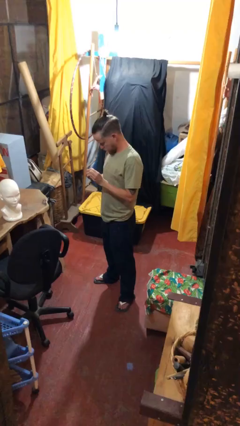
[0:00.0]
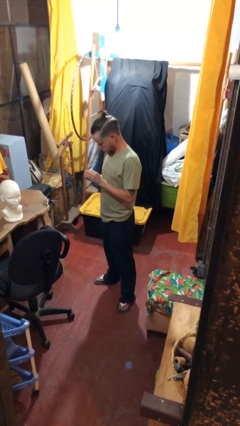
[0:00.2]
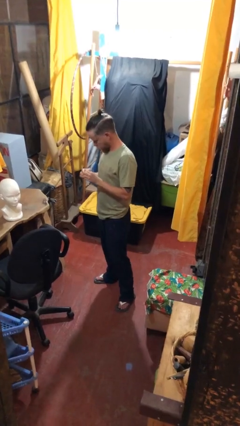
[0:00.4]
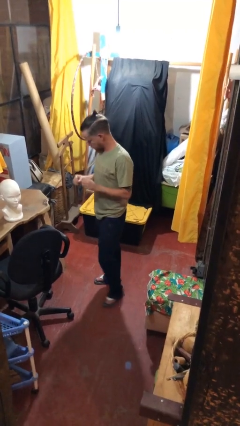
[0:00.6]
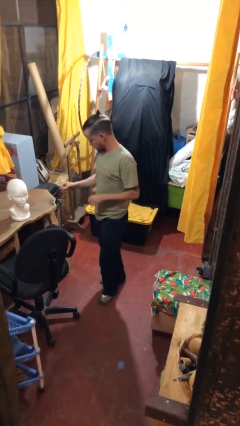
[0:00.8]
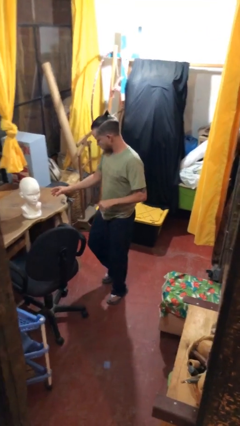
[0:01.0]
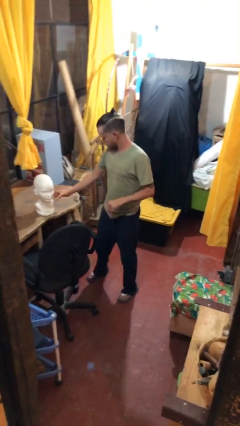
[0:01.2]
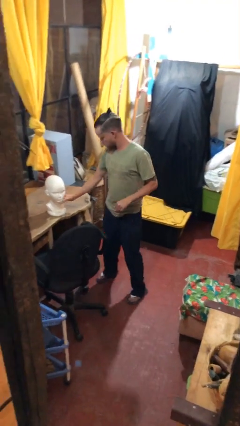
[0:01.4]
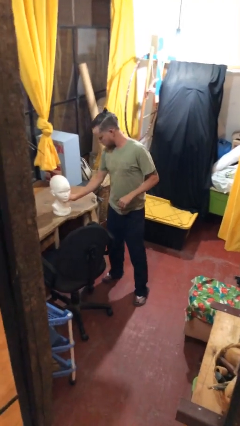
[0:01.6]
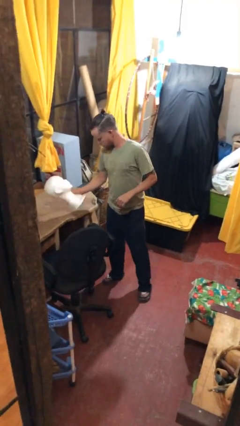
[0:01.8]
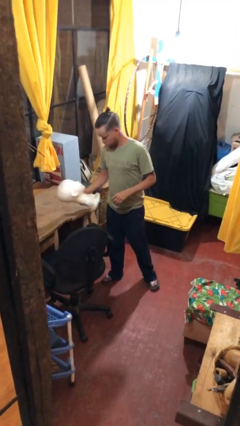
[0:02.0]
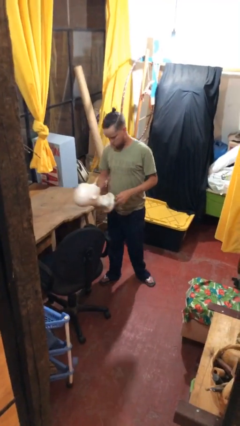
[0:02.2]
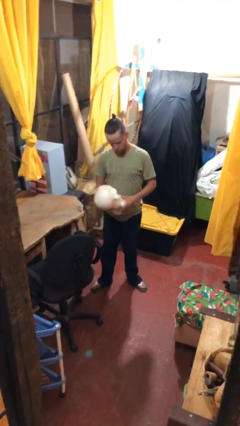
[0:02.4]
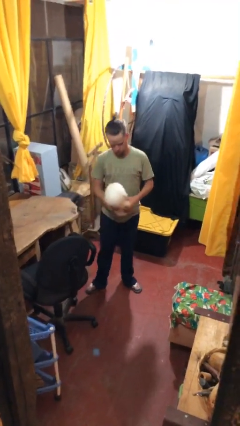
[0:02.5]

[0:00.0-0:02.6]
person picks up object from table

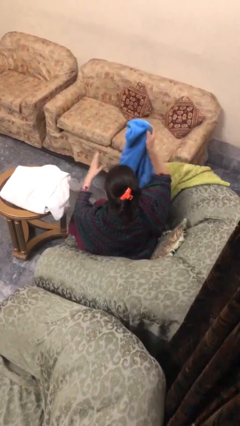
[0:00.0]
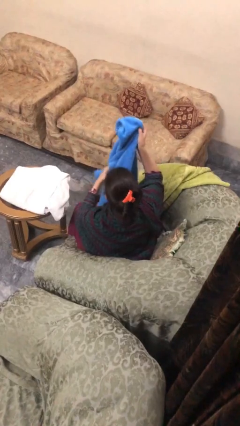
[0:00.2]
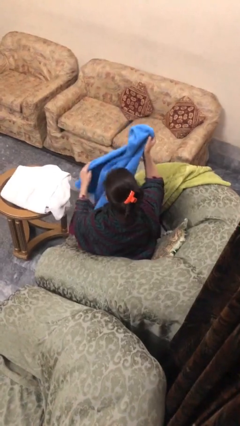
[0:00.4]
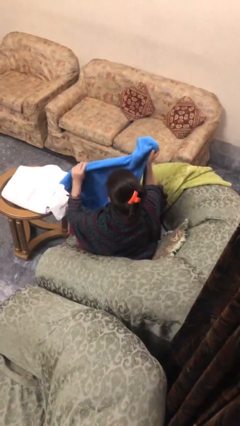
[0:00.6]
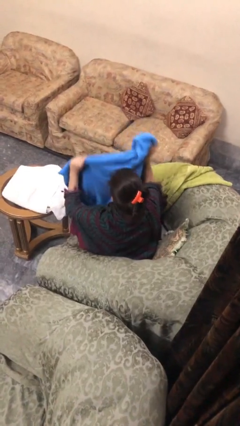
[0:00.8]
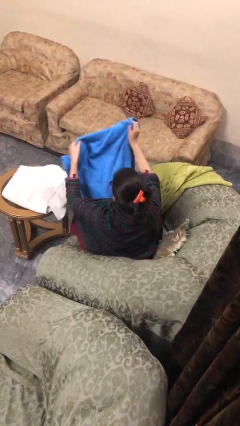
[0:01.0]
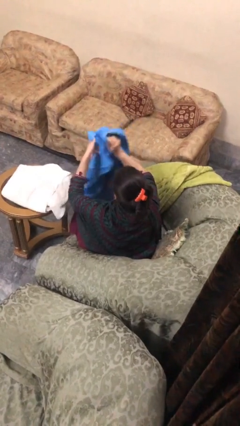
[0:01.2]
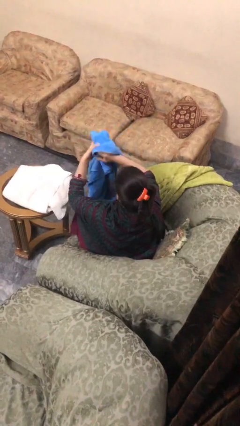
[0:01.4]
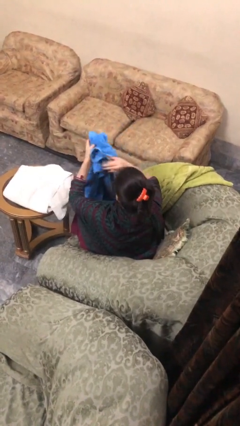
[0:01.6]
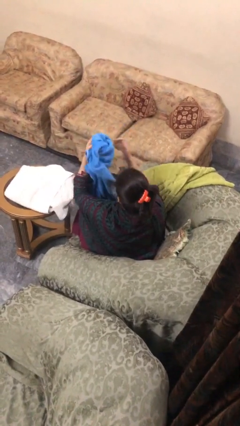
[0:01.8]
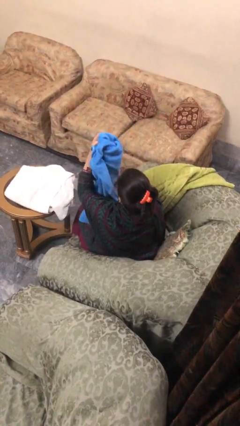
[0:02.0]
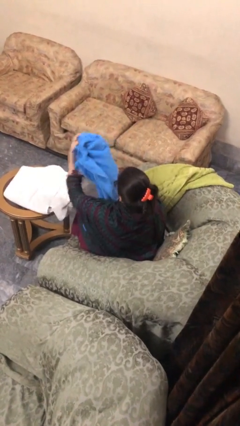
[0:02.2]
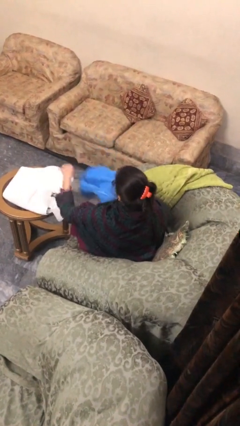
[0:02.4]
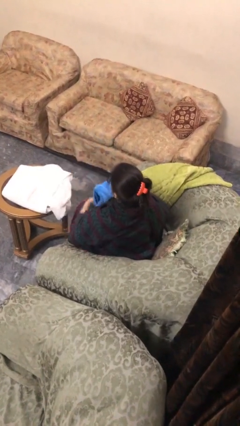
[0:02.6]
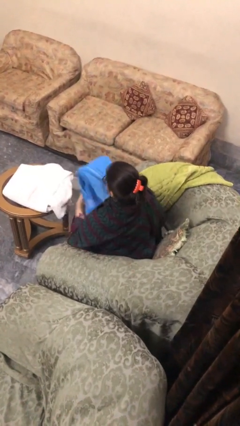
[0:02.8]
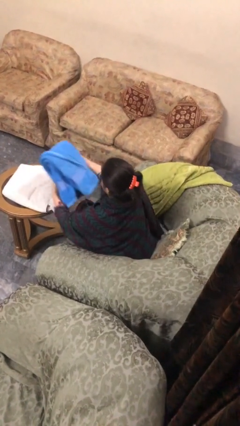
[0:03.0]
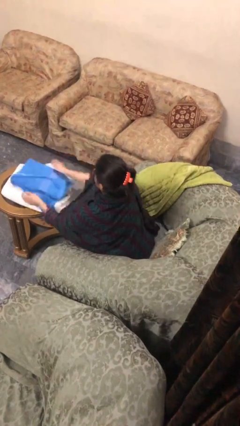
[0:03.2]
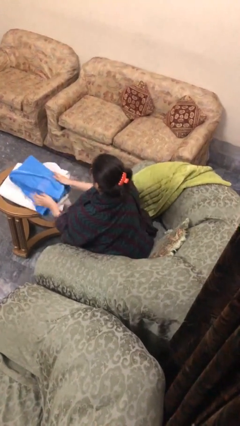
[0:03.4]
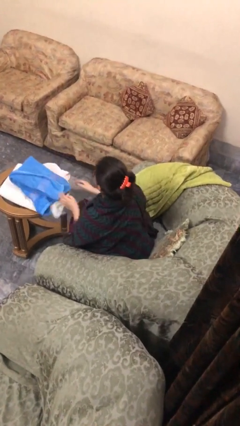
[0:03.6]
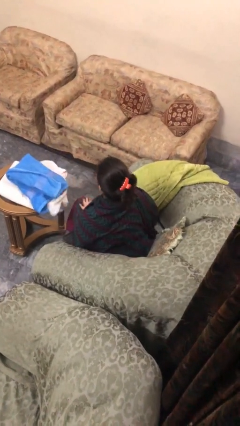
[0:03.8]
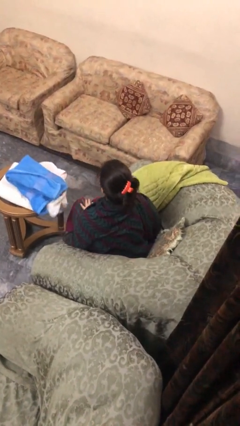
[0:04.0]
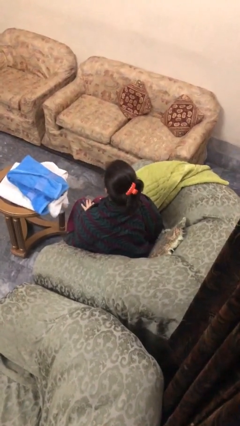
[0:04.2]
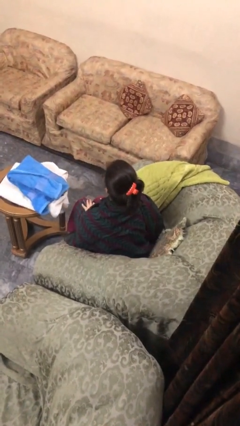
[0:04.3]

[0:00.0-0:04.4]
person folds towel

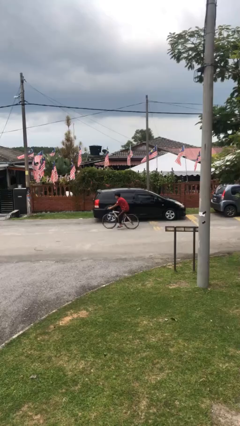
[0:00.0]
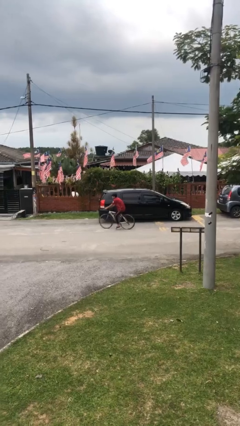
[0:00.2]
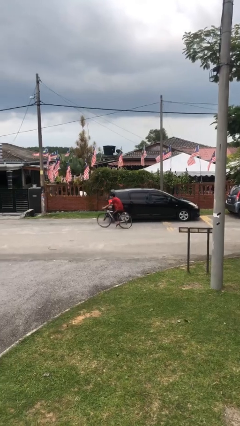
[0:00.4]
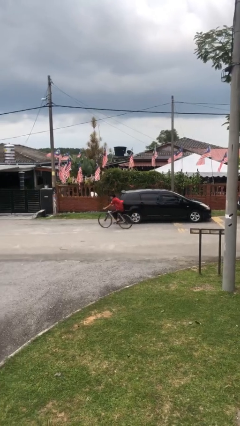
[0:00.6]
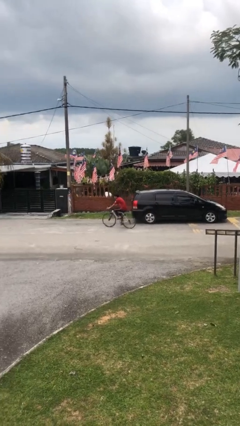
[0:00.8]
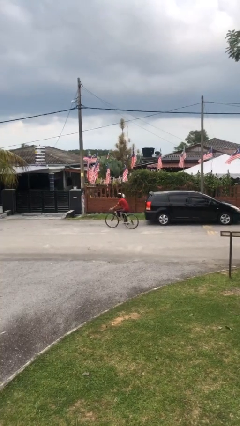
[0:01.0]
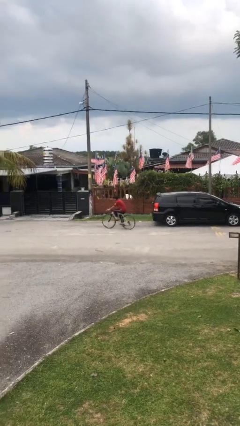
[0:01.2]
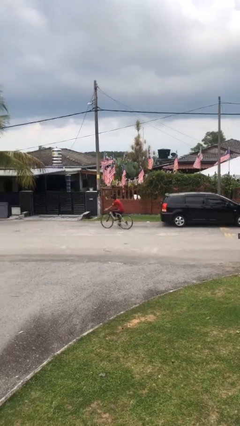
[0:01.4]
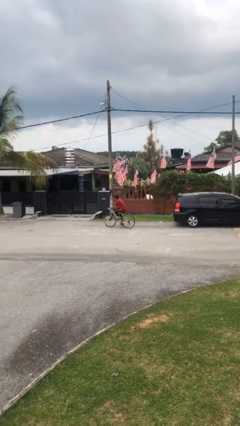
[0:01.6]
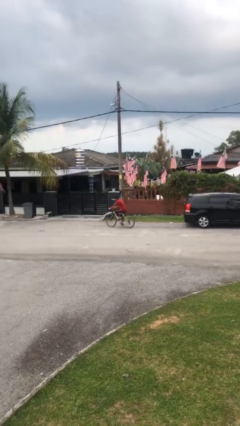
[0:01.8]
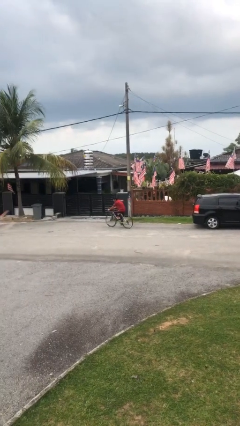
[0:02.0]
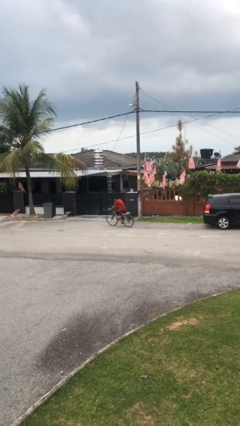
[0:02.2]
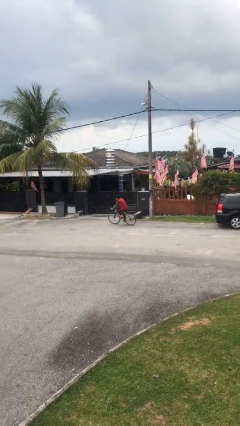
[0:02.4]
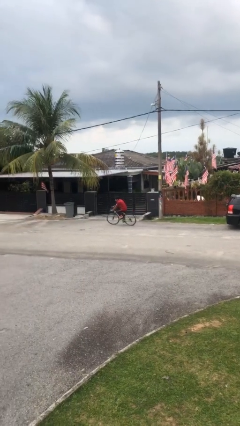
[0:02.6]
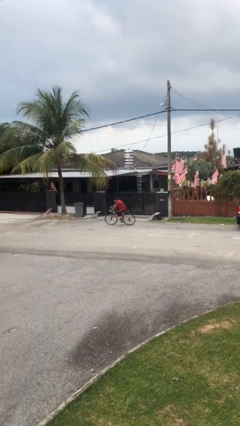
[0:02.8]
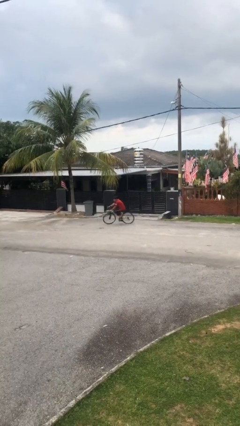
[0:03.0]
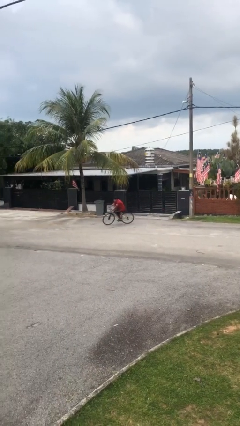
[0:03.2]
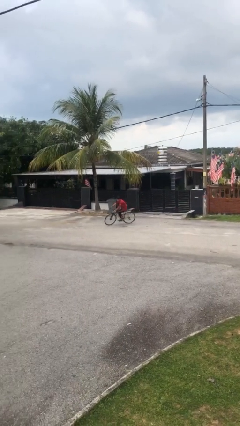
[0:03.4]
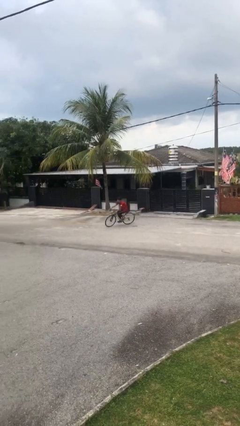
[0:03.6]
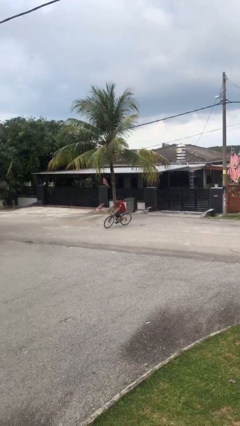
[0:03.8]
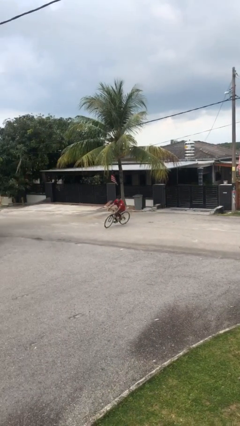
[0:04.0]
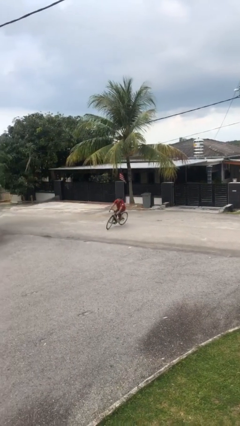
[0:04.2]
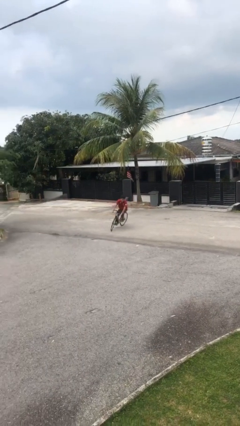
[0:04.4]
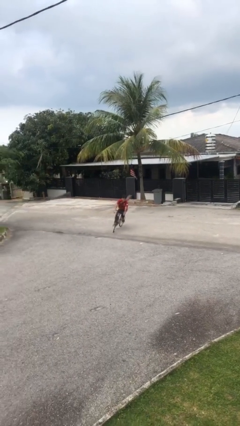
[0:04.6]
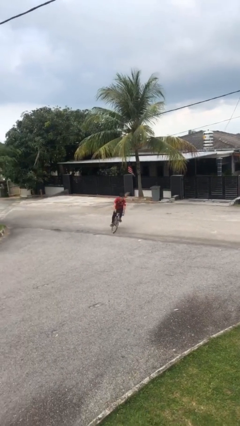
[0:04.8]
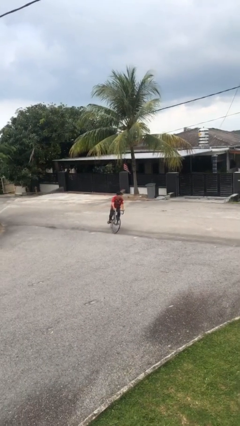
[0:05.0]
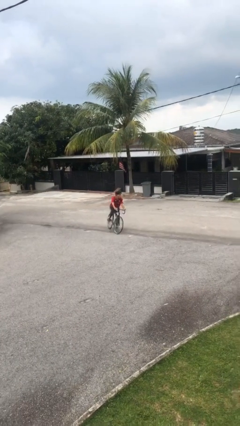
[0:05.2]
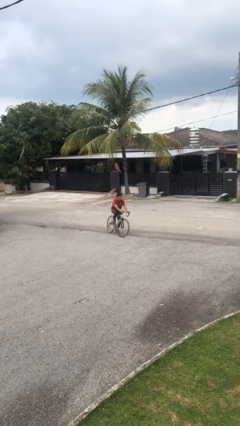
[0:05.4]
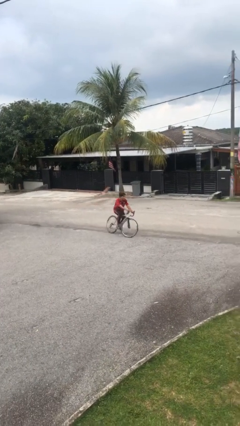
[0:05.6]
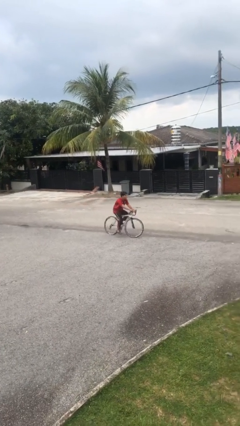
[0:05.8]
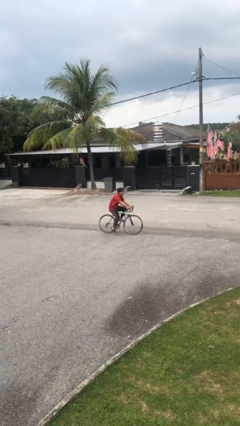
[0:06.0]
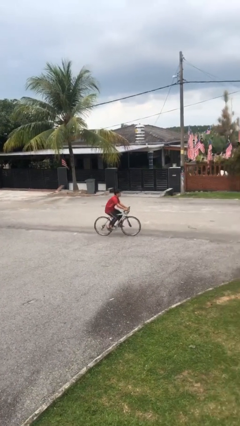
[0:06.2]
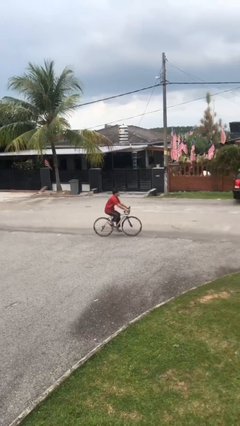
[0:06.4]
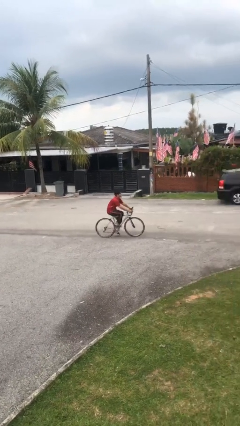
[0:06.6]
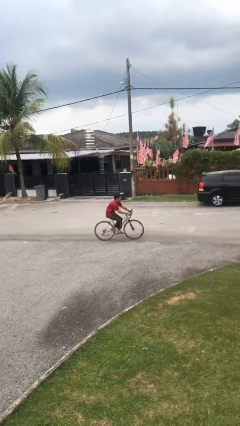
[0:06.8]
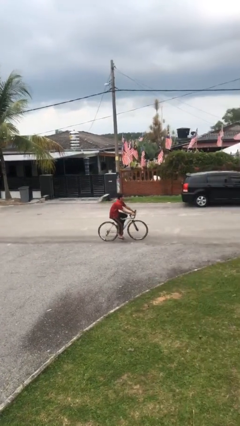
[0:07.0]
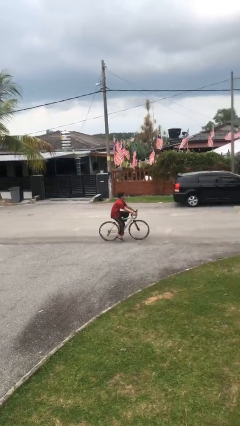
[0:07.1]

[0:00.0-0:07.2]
person rides bicycle

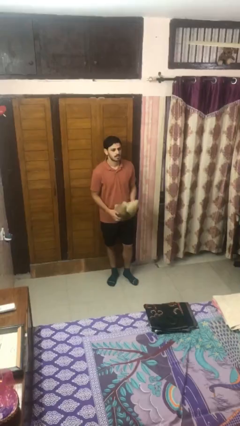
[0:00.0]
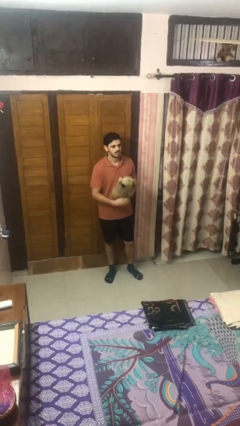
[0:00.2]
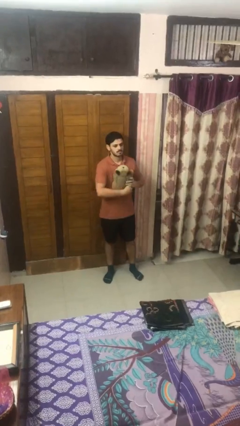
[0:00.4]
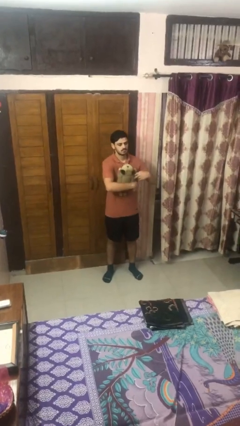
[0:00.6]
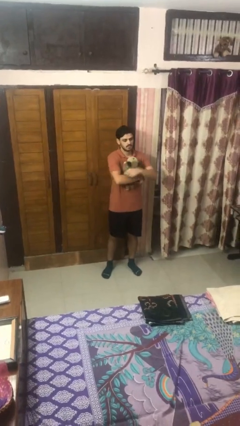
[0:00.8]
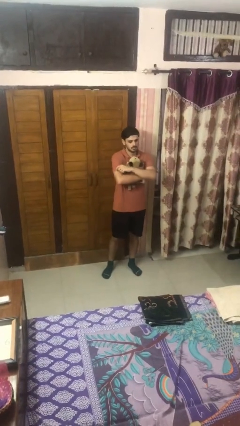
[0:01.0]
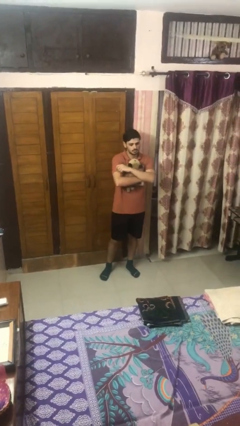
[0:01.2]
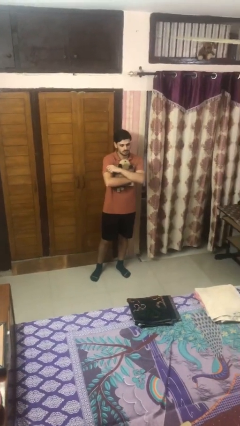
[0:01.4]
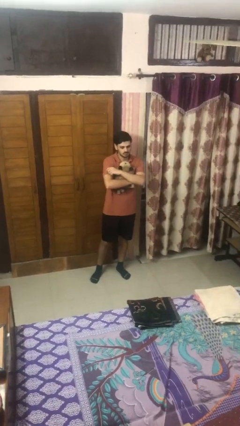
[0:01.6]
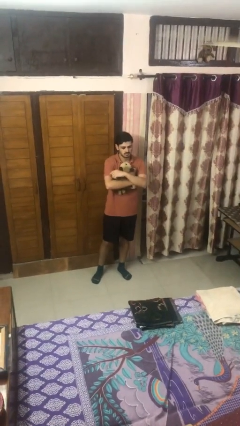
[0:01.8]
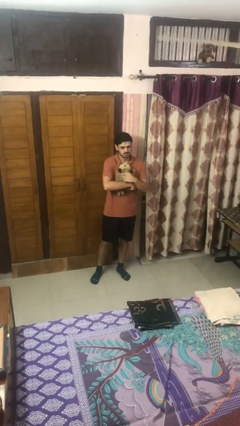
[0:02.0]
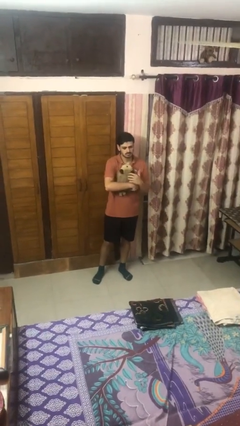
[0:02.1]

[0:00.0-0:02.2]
person hugs stuffed animal

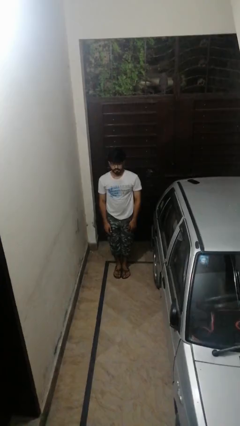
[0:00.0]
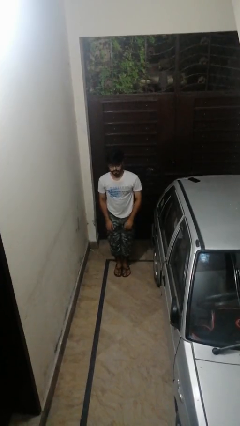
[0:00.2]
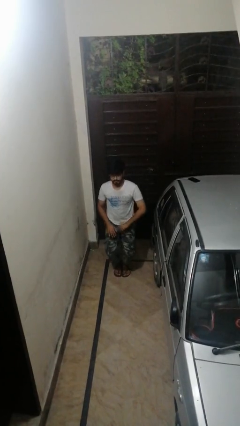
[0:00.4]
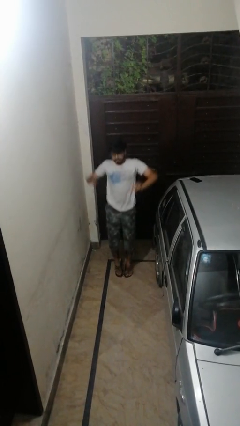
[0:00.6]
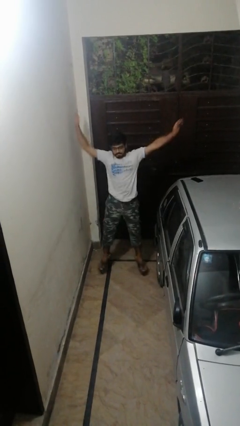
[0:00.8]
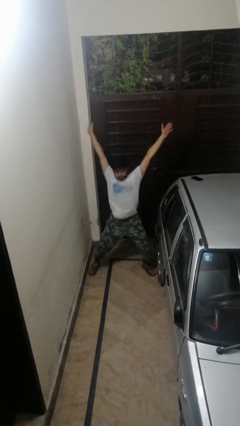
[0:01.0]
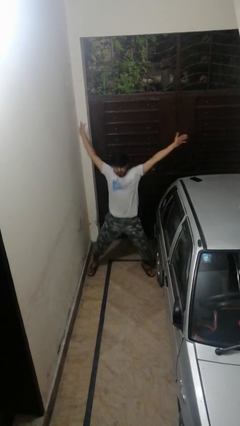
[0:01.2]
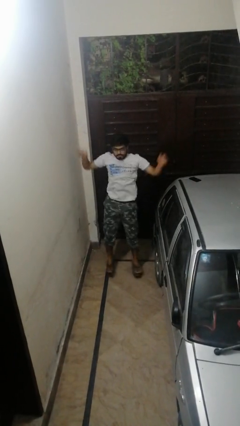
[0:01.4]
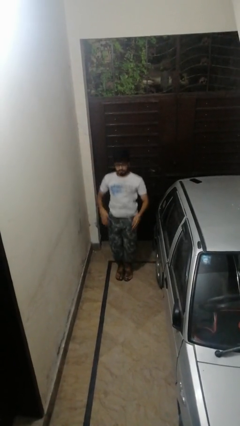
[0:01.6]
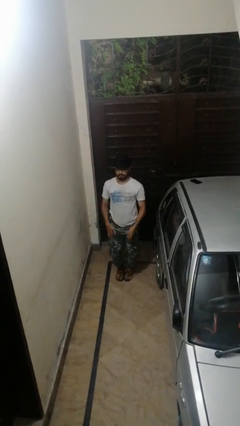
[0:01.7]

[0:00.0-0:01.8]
person exercises with jumping jacks
